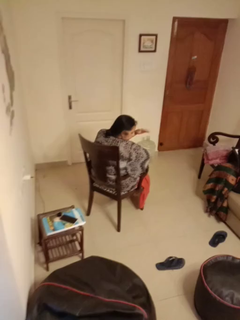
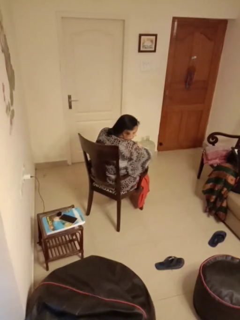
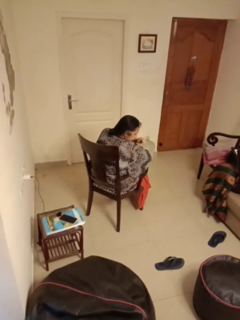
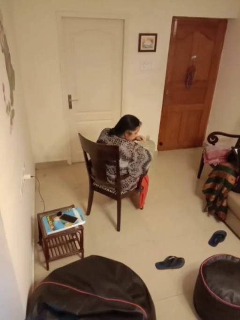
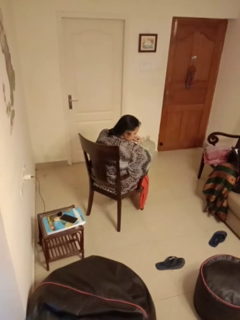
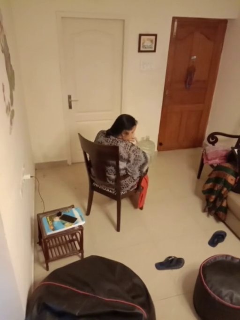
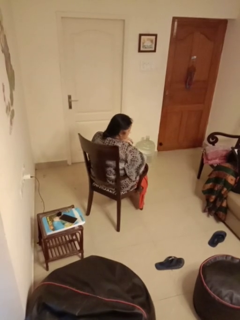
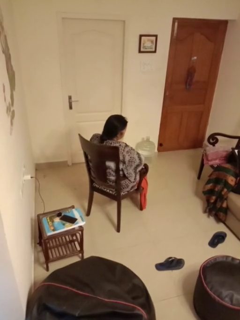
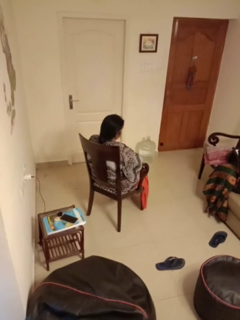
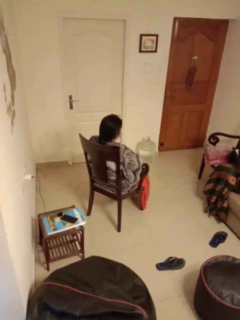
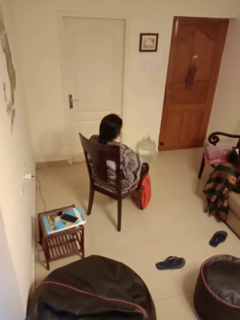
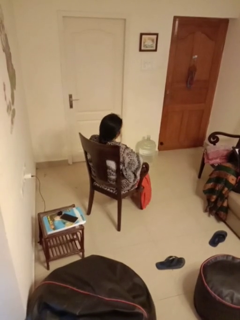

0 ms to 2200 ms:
person swats bug

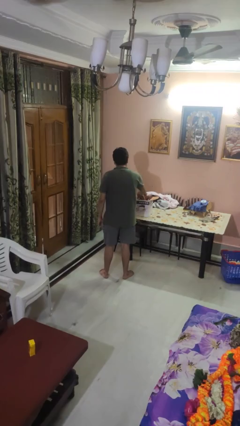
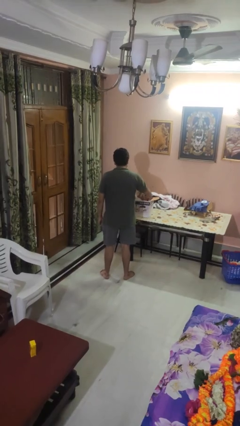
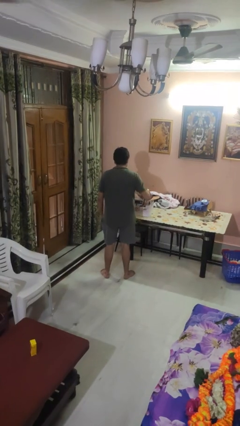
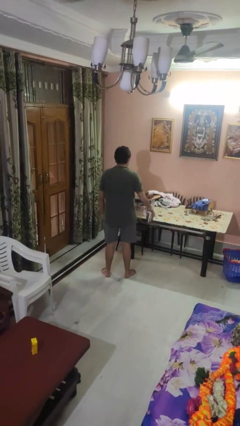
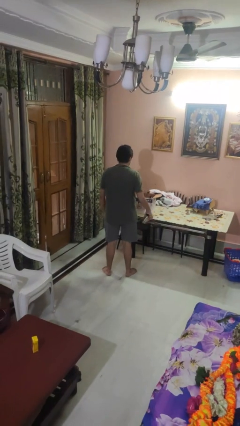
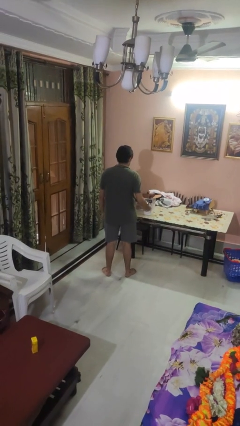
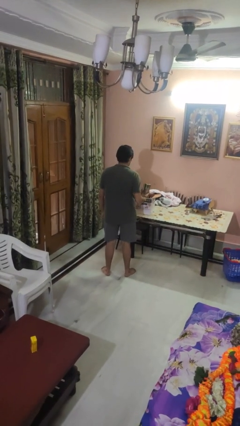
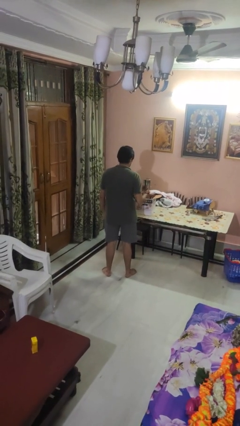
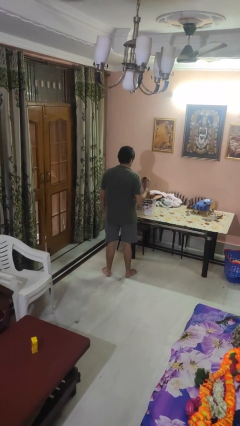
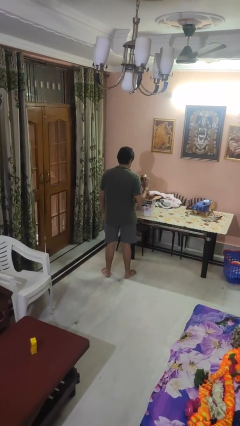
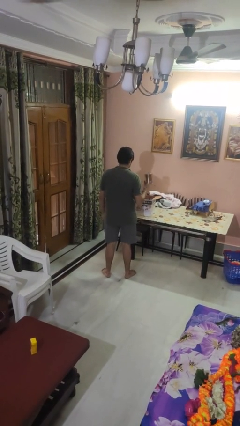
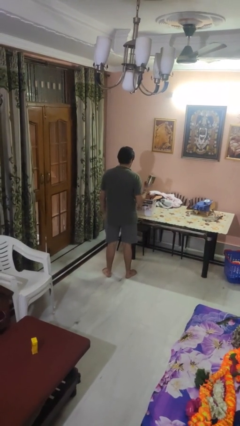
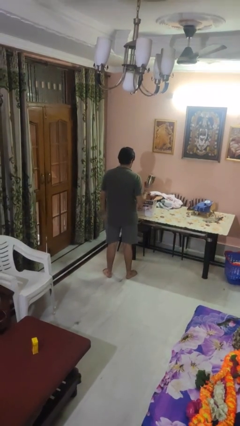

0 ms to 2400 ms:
person takes object from box

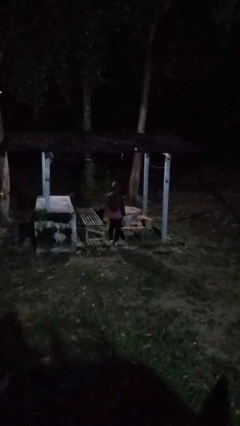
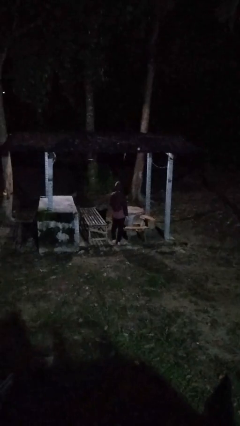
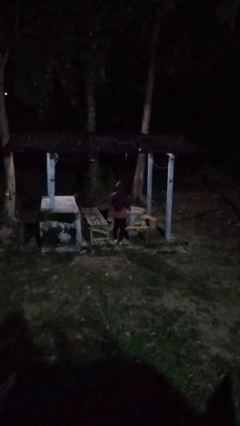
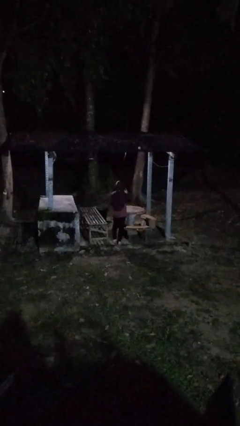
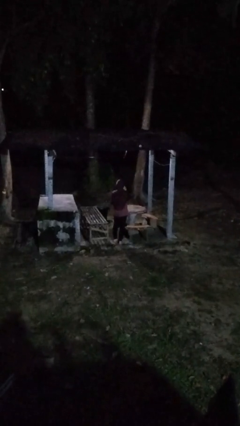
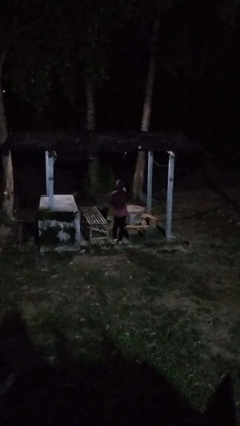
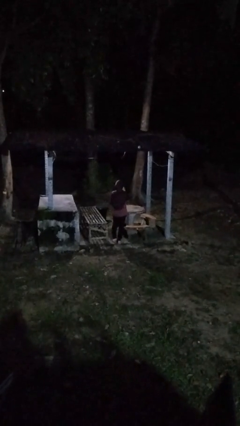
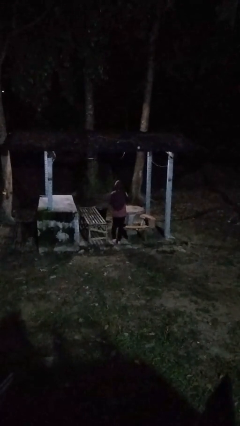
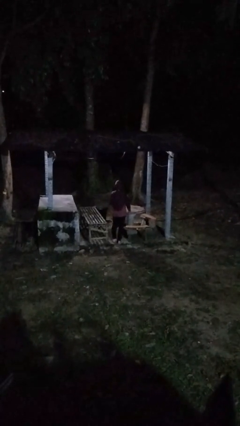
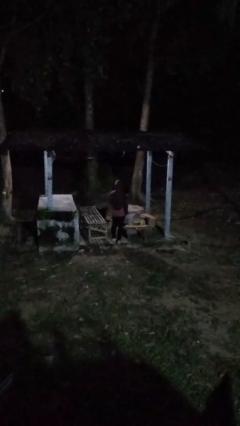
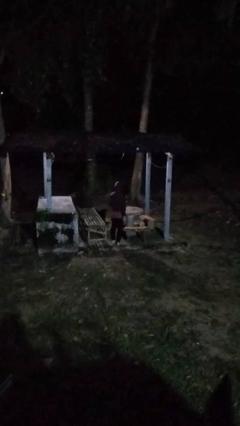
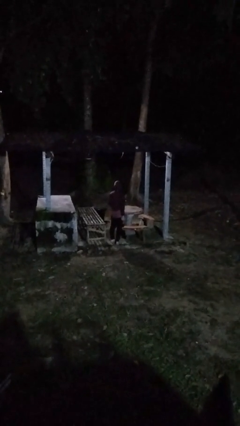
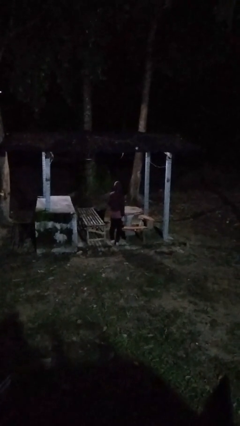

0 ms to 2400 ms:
person gestures be quiet

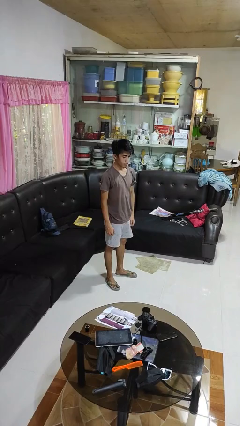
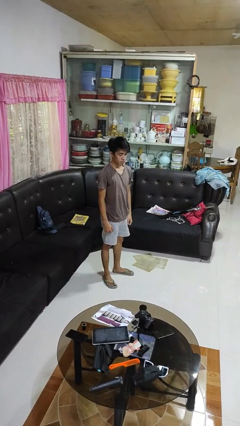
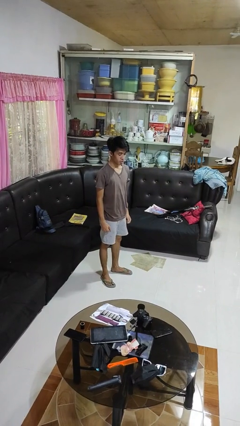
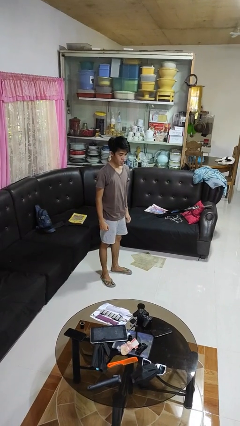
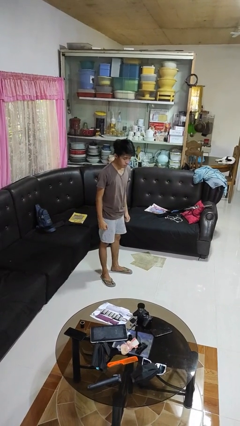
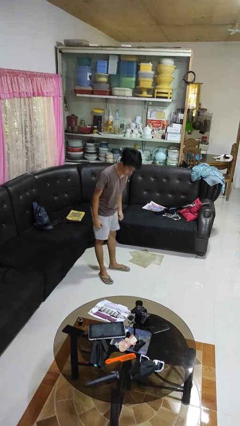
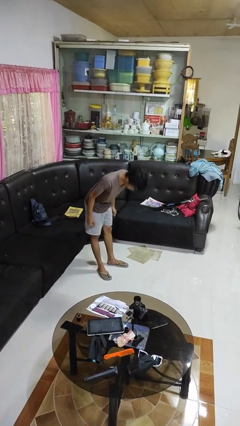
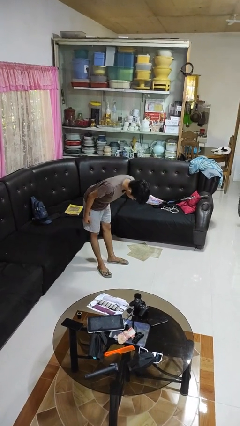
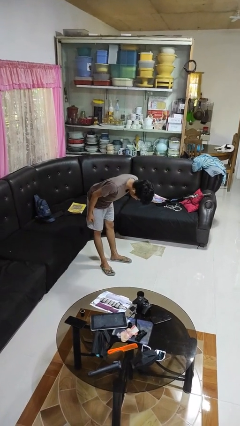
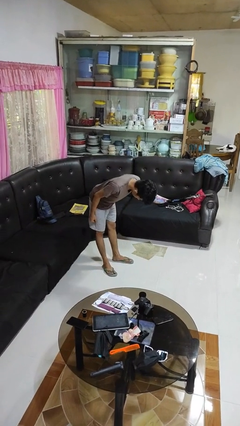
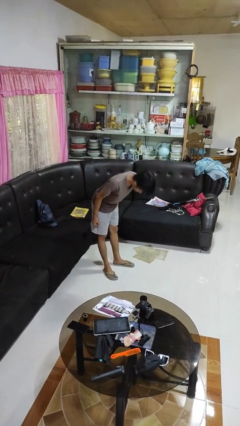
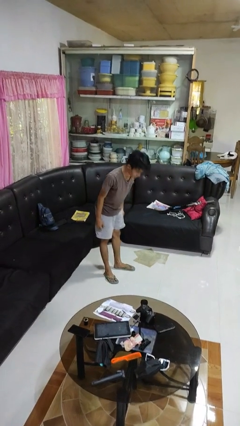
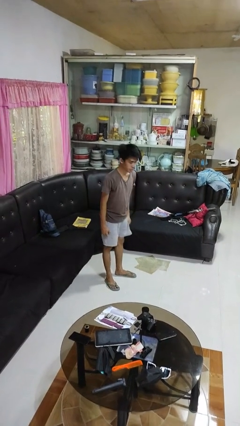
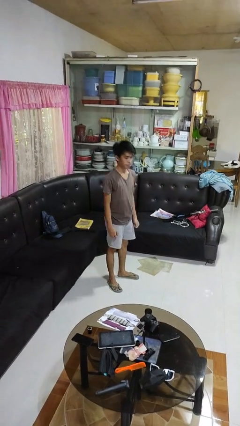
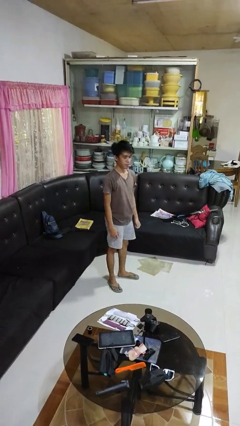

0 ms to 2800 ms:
person bows

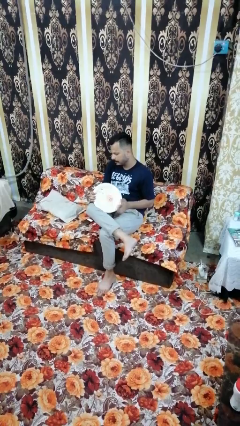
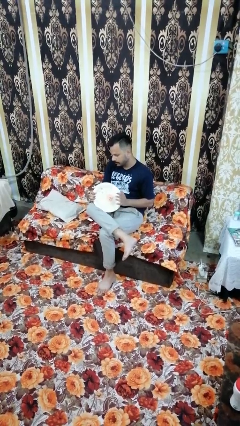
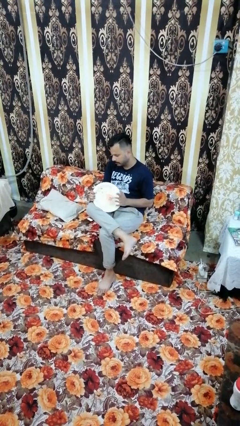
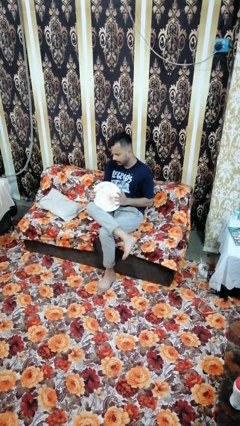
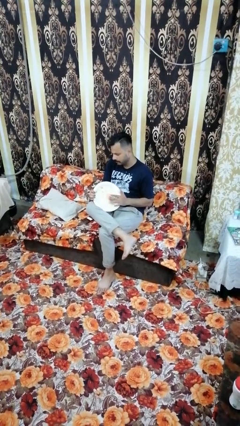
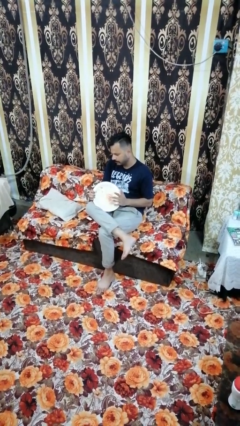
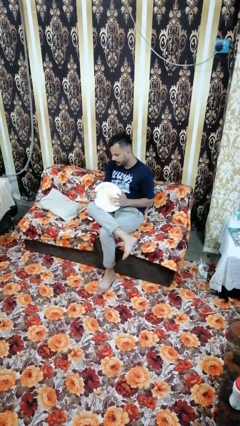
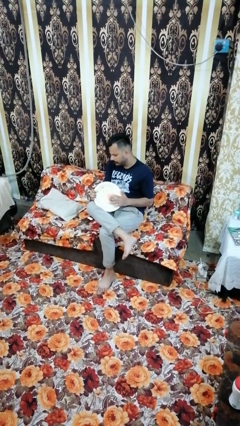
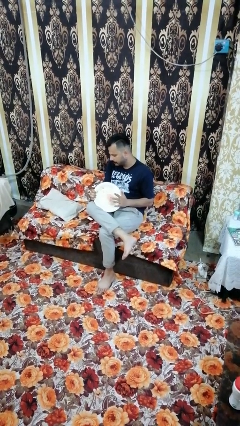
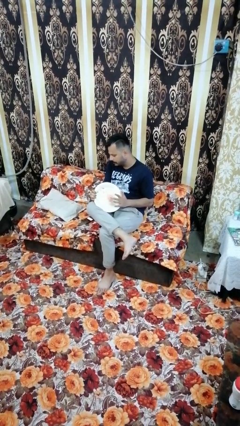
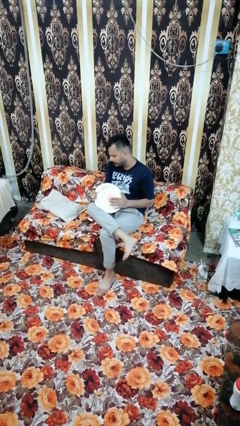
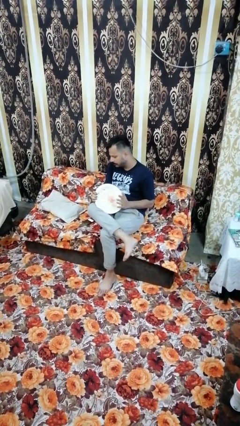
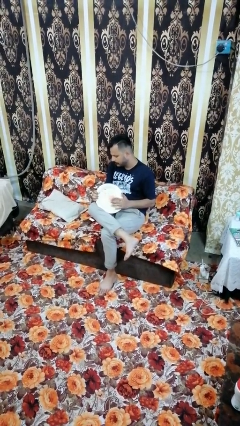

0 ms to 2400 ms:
person taps object with finger

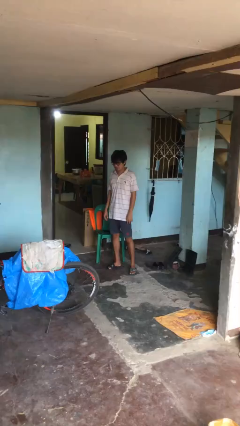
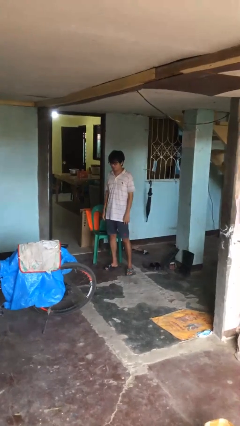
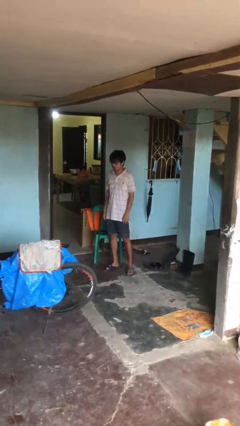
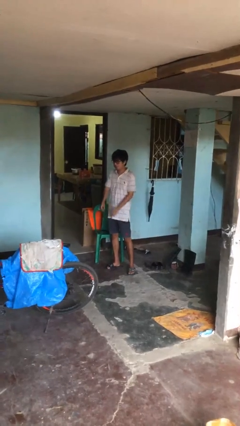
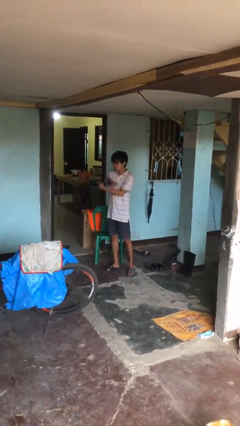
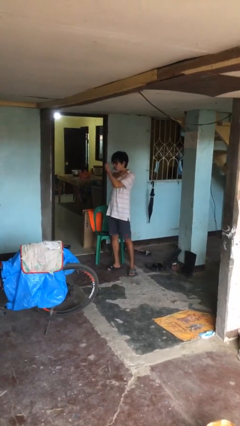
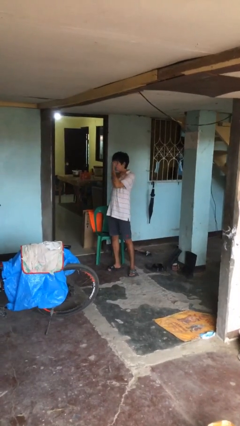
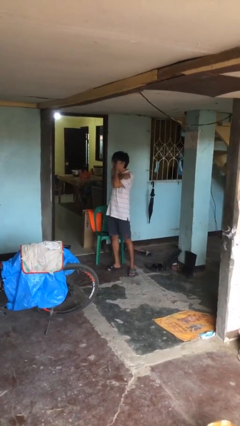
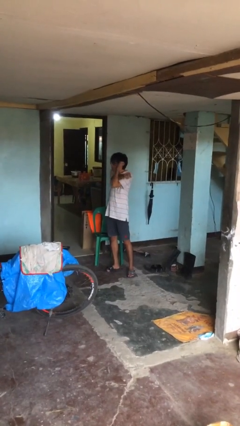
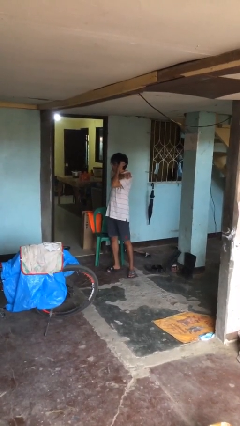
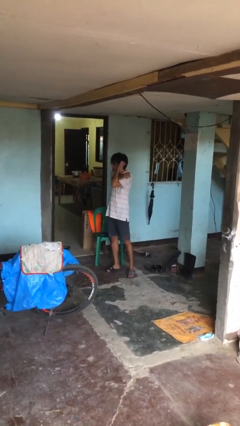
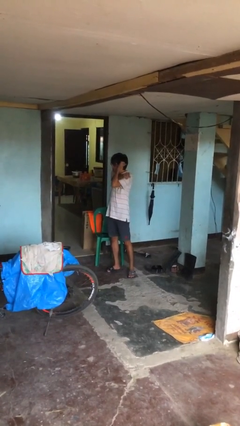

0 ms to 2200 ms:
person crosses arms

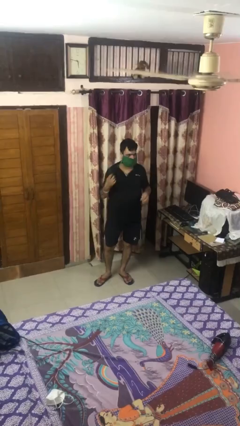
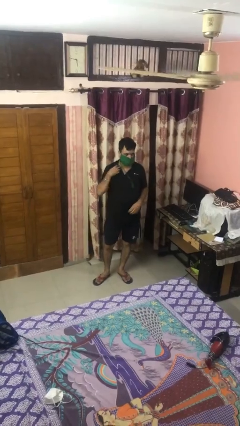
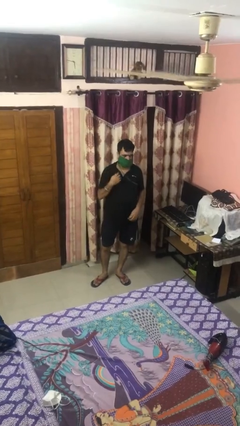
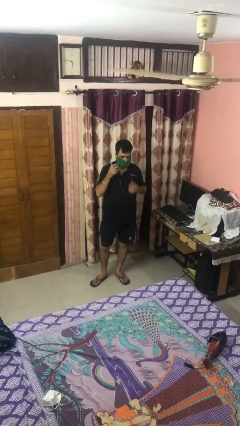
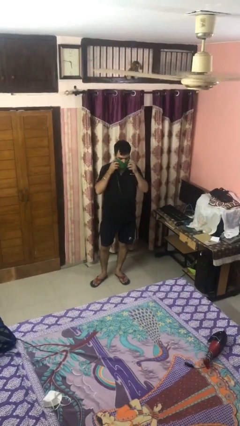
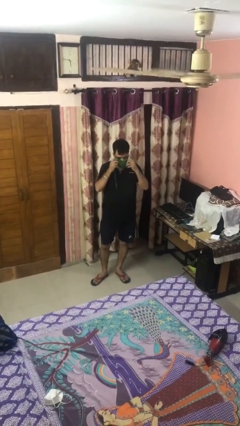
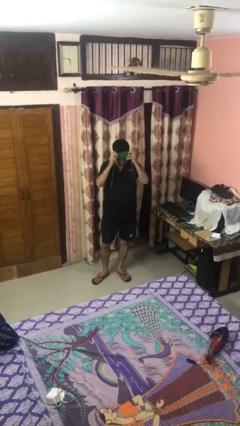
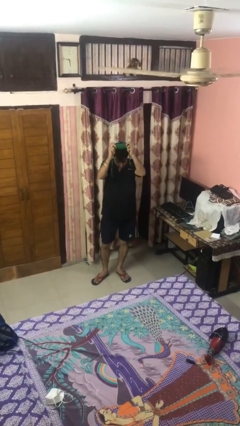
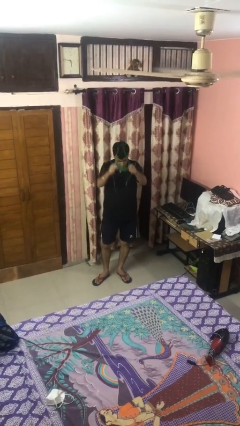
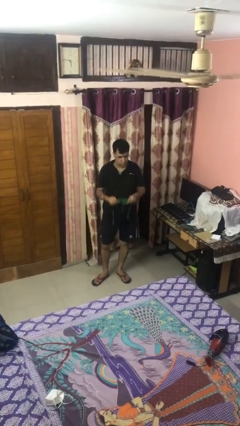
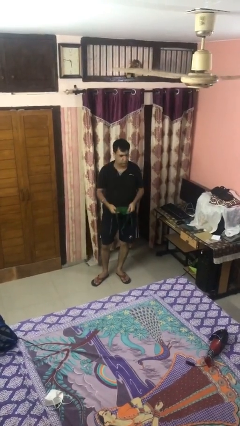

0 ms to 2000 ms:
person takes off facemask

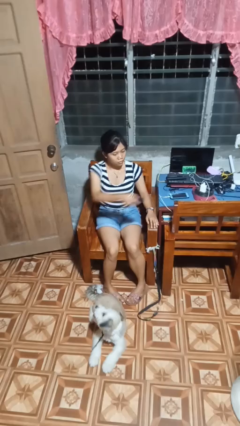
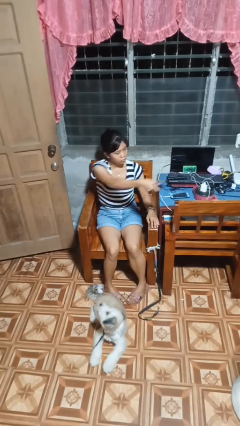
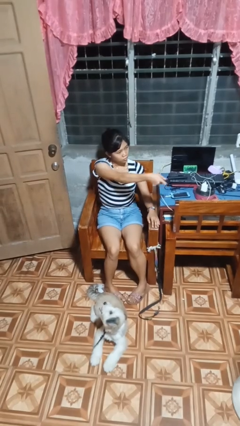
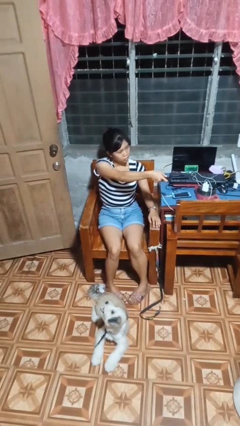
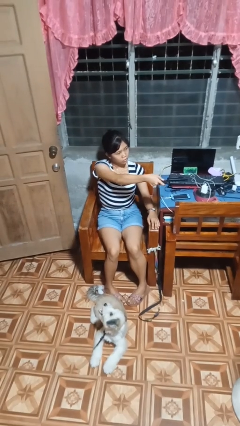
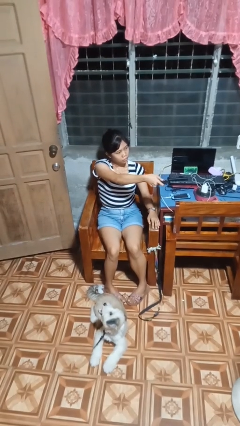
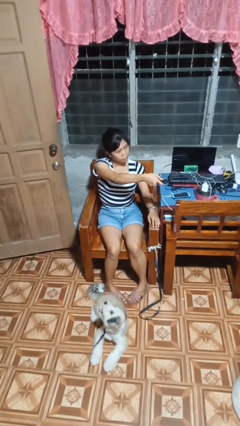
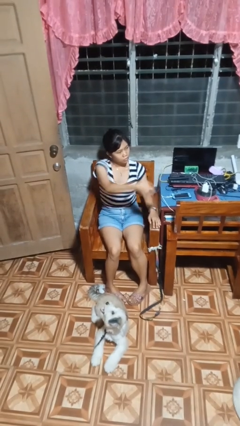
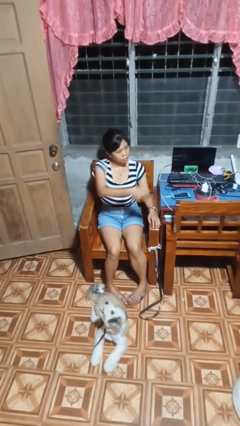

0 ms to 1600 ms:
person uses television remote
